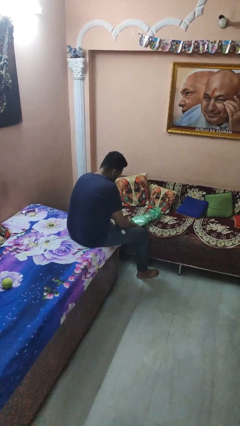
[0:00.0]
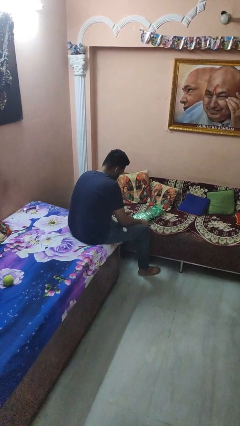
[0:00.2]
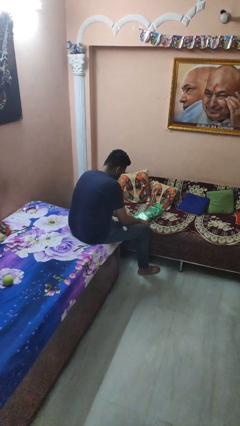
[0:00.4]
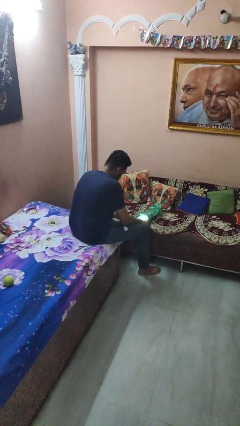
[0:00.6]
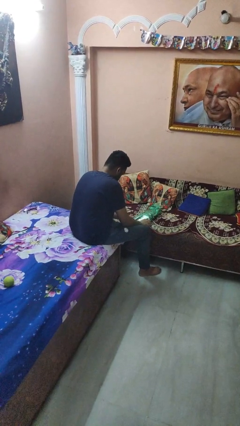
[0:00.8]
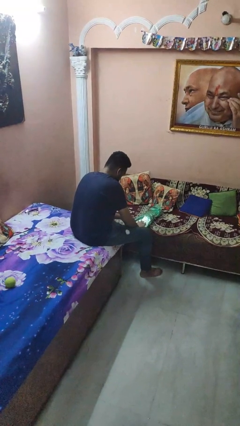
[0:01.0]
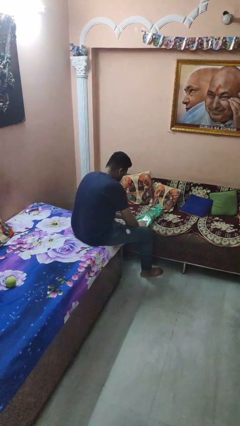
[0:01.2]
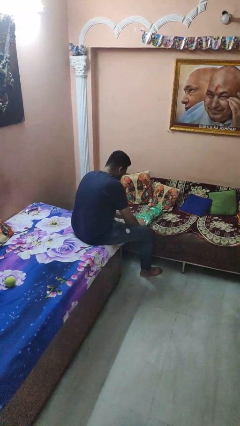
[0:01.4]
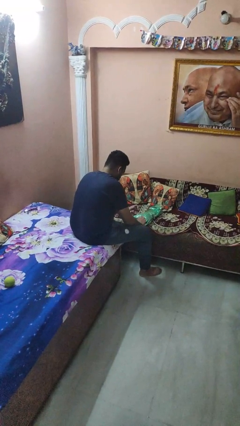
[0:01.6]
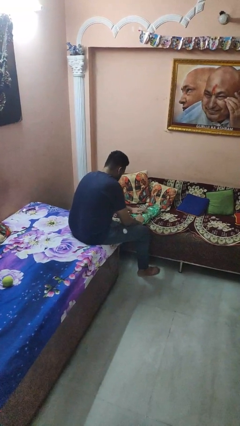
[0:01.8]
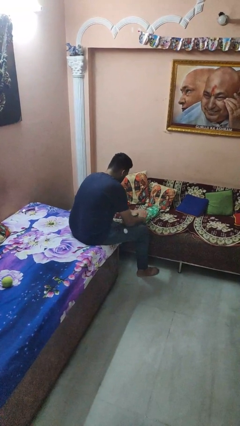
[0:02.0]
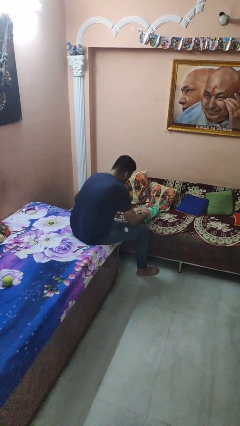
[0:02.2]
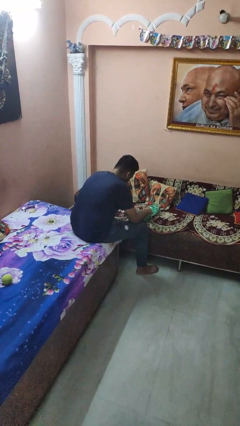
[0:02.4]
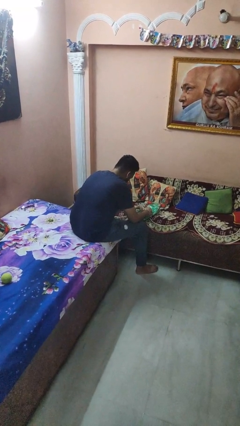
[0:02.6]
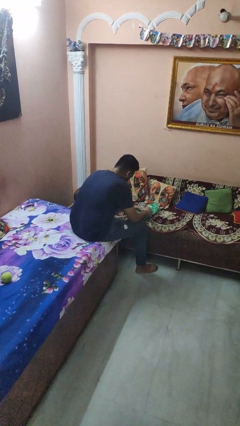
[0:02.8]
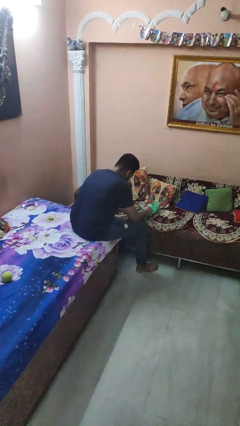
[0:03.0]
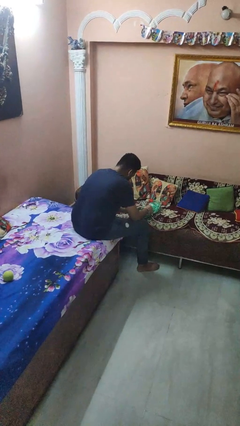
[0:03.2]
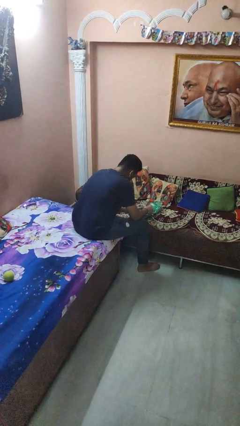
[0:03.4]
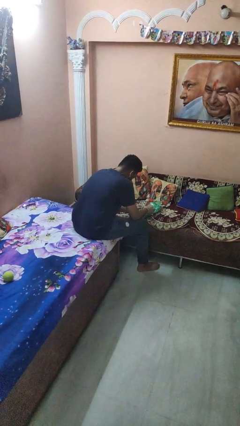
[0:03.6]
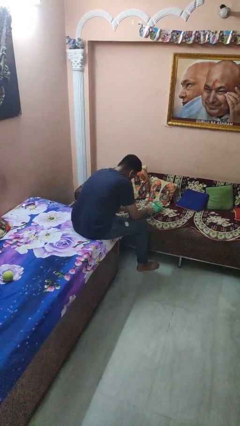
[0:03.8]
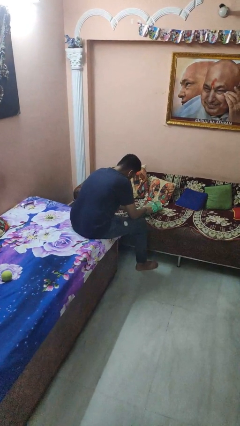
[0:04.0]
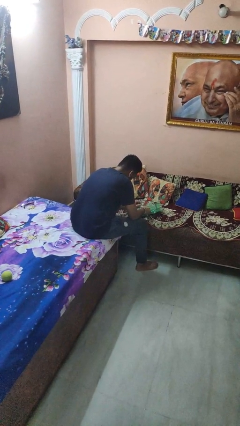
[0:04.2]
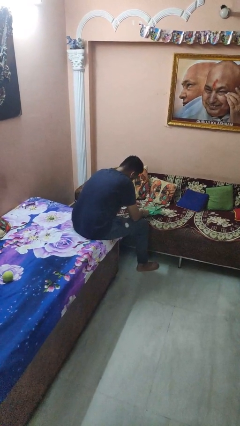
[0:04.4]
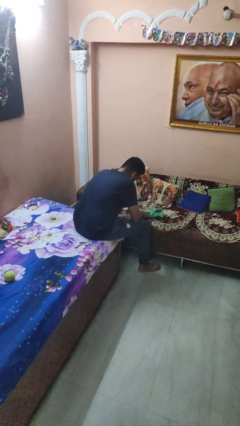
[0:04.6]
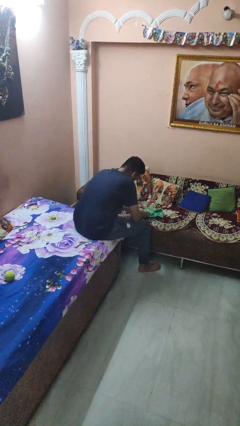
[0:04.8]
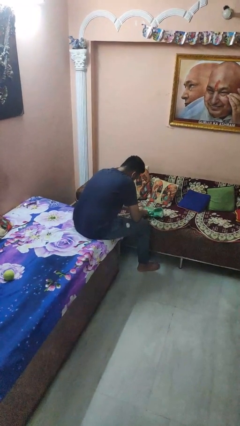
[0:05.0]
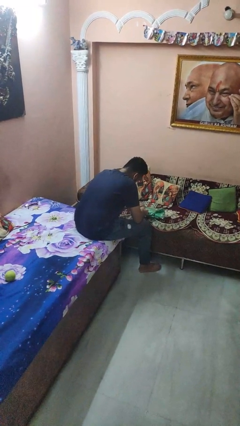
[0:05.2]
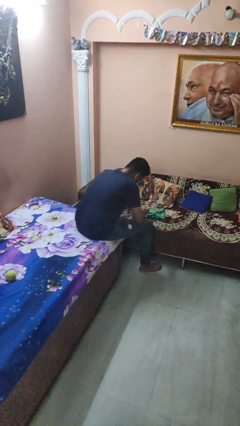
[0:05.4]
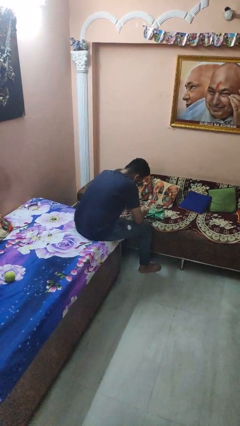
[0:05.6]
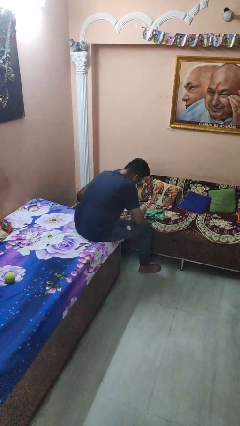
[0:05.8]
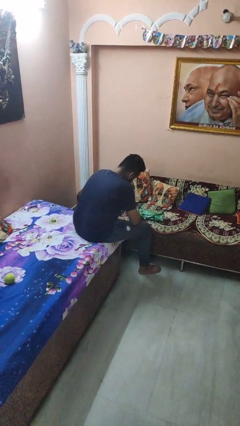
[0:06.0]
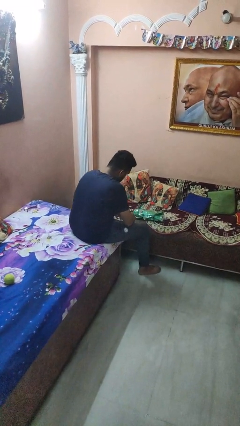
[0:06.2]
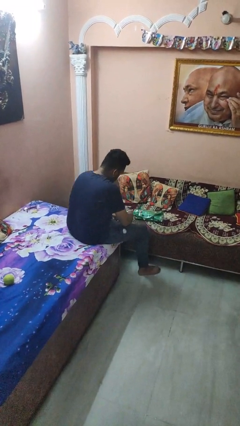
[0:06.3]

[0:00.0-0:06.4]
person wraps box

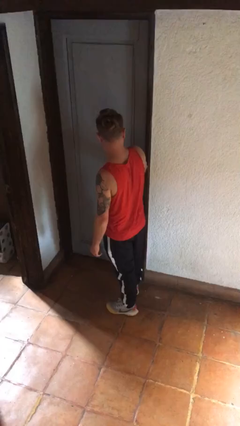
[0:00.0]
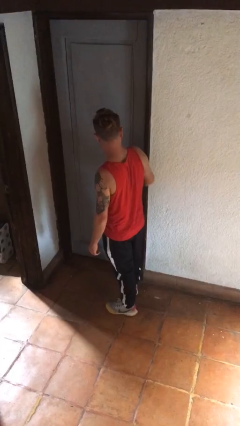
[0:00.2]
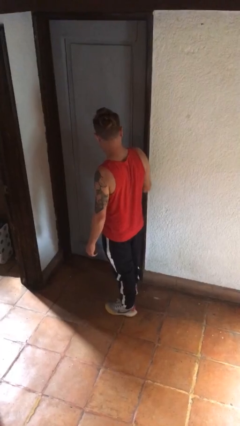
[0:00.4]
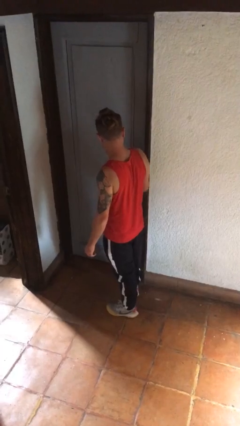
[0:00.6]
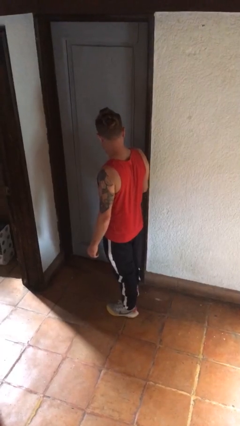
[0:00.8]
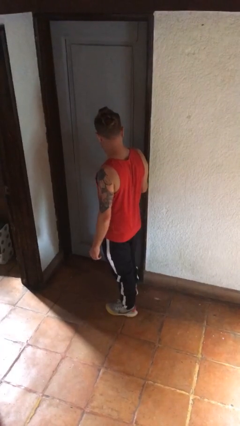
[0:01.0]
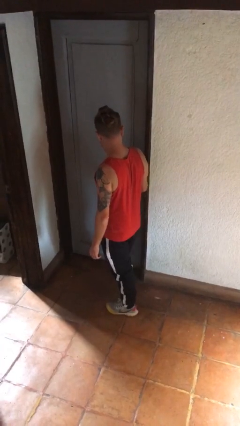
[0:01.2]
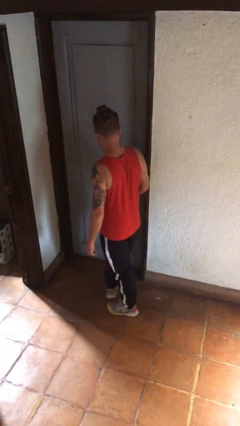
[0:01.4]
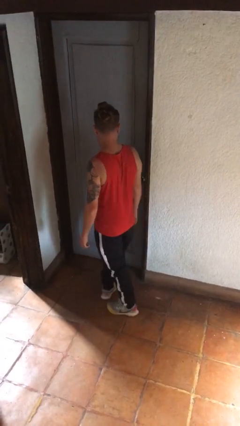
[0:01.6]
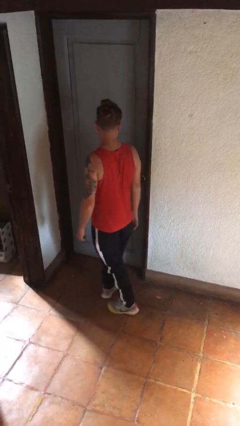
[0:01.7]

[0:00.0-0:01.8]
person locks door with keys

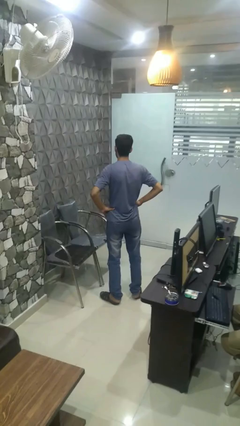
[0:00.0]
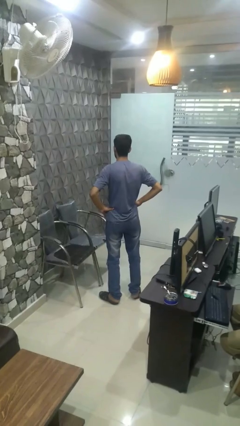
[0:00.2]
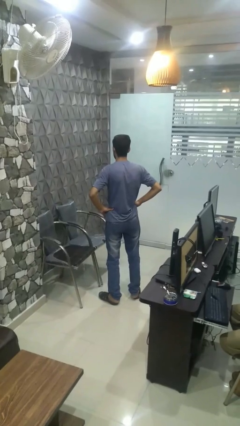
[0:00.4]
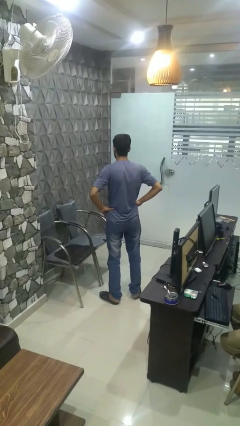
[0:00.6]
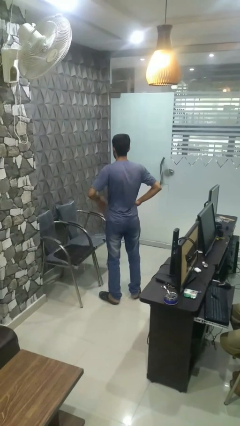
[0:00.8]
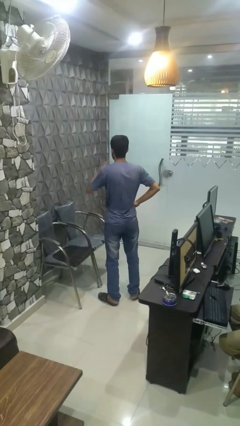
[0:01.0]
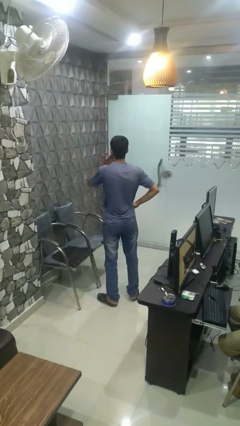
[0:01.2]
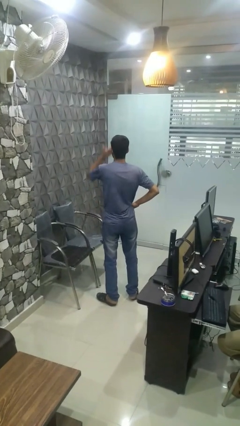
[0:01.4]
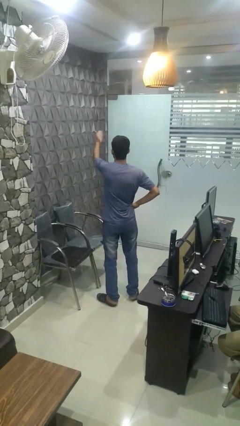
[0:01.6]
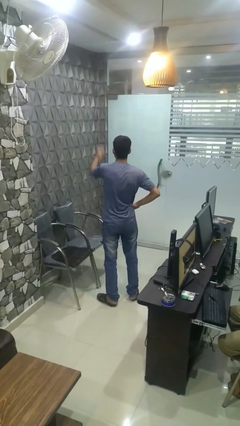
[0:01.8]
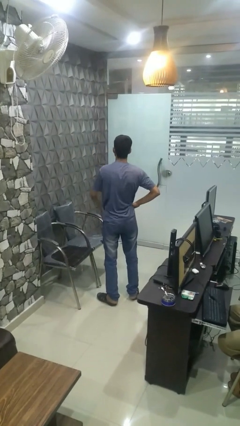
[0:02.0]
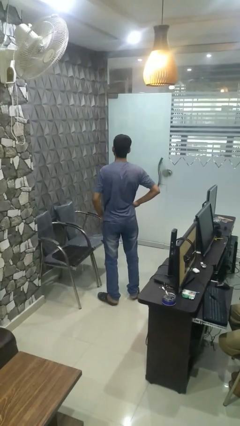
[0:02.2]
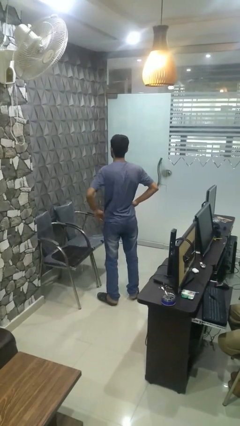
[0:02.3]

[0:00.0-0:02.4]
person gestures blow kiss

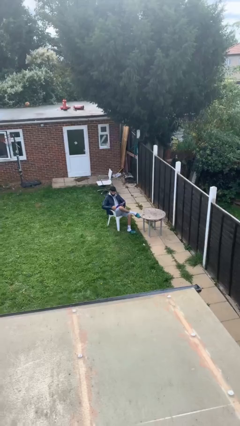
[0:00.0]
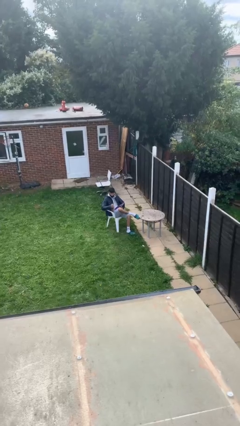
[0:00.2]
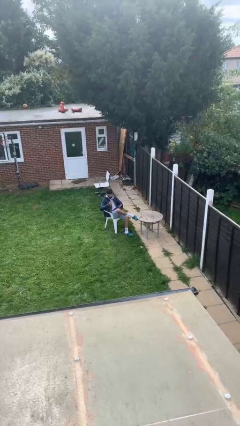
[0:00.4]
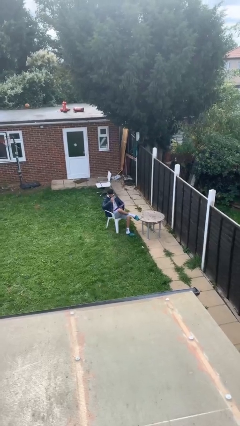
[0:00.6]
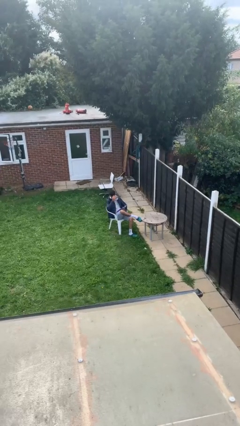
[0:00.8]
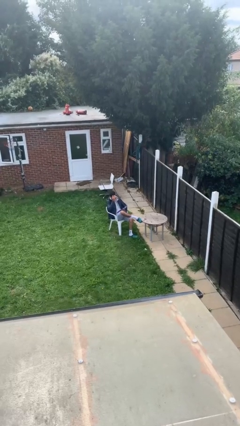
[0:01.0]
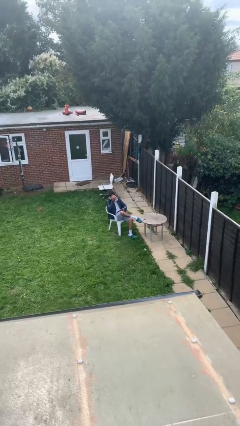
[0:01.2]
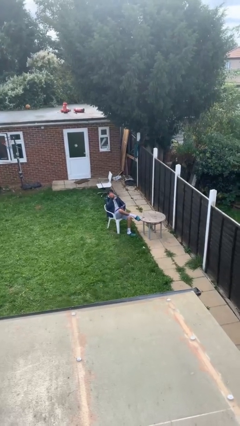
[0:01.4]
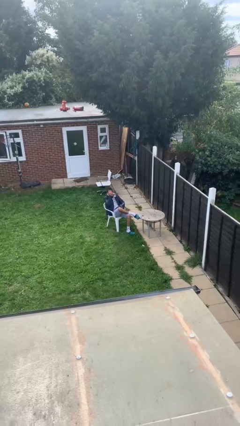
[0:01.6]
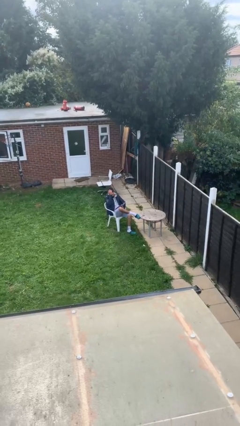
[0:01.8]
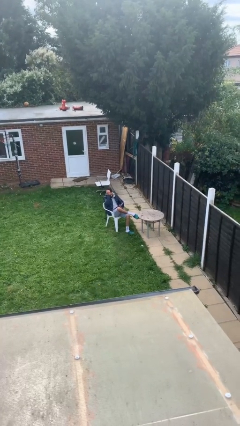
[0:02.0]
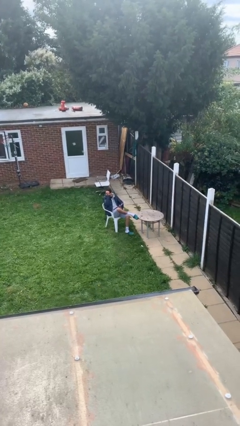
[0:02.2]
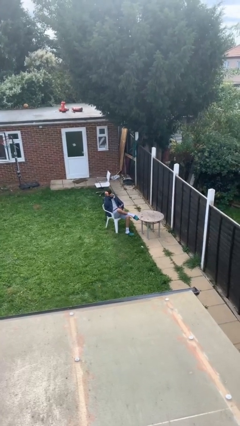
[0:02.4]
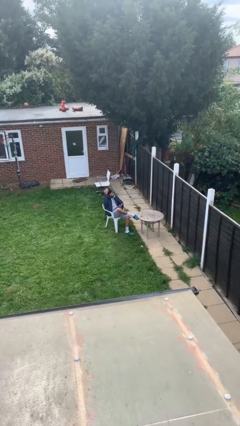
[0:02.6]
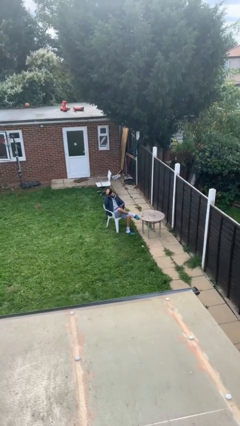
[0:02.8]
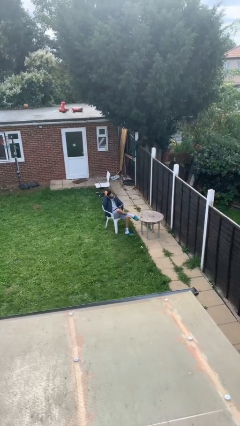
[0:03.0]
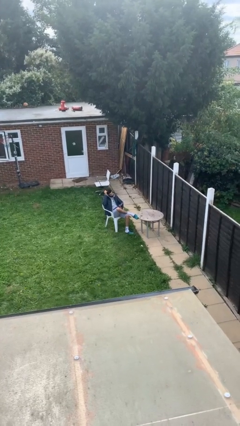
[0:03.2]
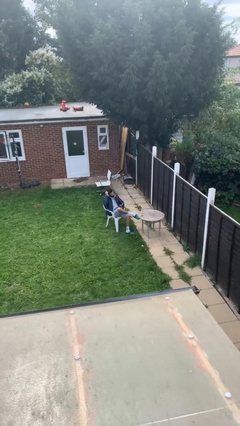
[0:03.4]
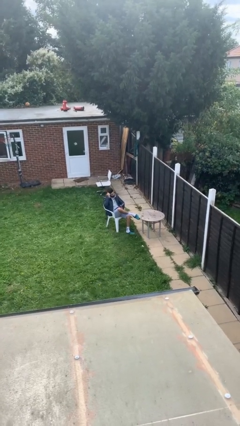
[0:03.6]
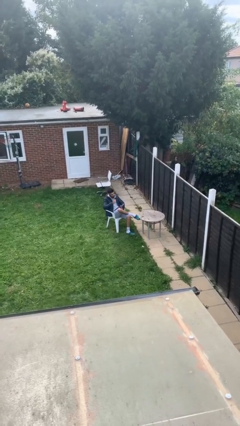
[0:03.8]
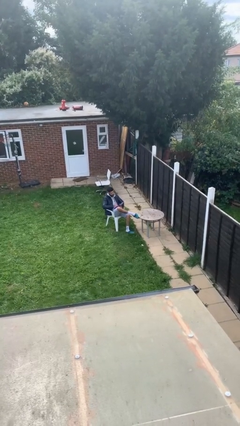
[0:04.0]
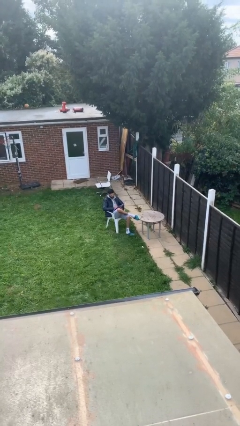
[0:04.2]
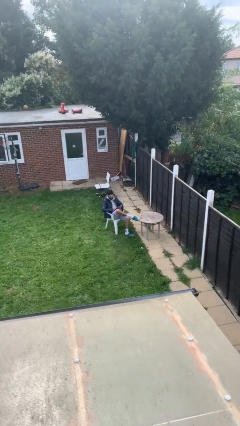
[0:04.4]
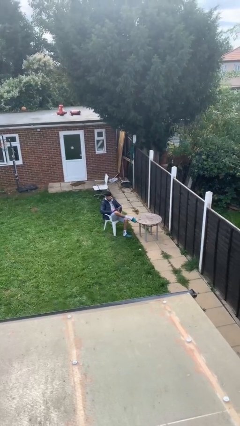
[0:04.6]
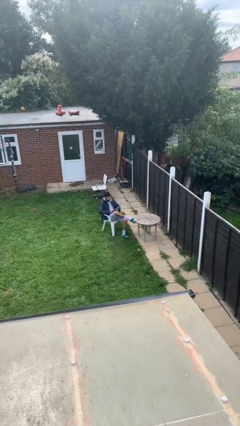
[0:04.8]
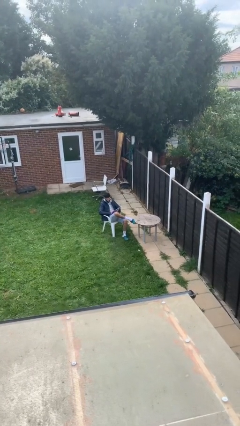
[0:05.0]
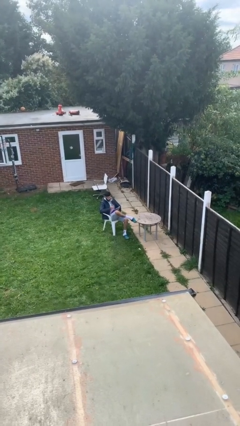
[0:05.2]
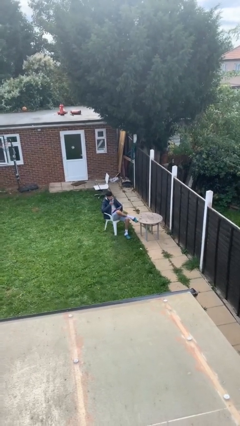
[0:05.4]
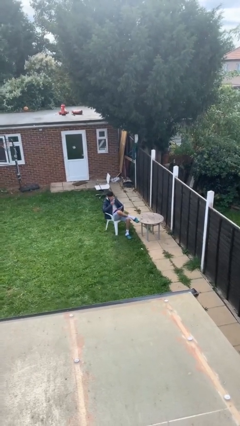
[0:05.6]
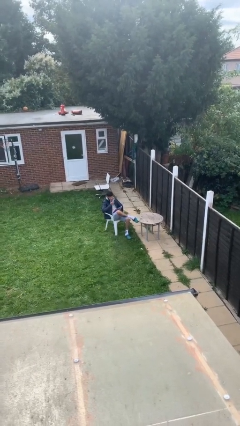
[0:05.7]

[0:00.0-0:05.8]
person reads document

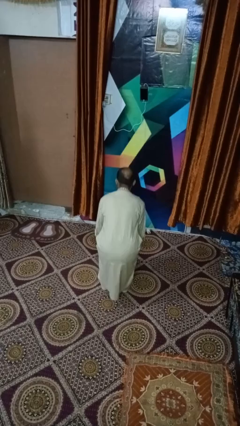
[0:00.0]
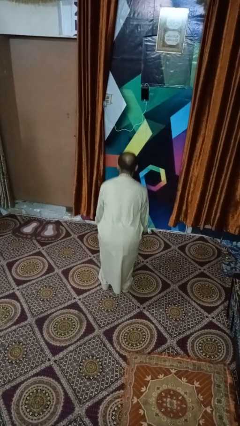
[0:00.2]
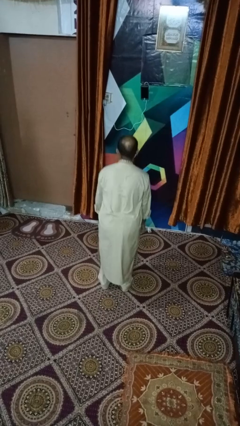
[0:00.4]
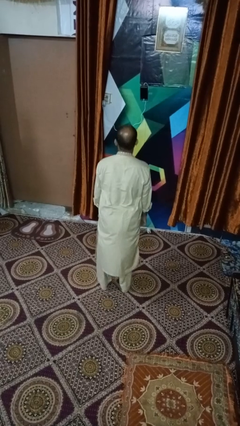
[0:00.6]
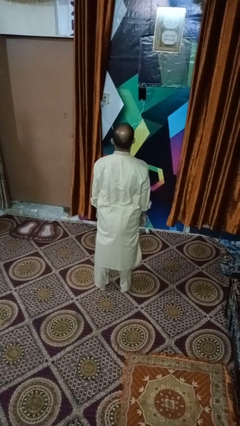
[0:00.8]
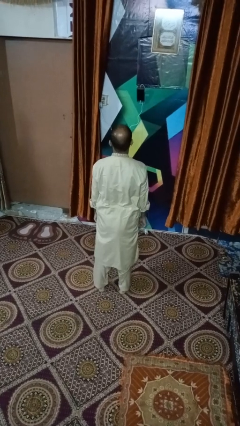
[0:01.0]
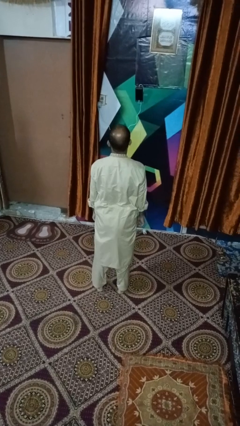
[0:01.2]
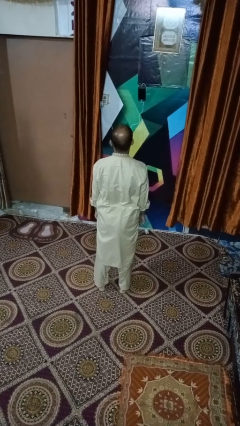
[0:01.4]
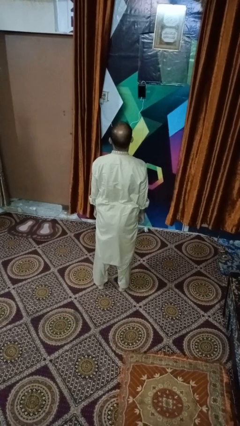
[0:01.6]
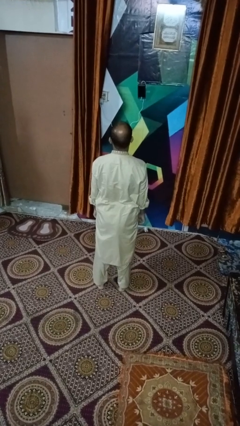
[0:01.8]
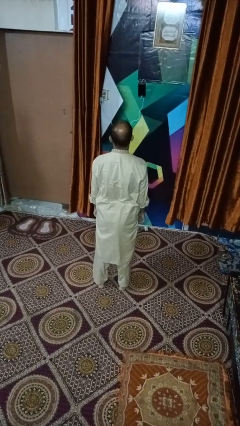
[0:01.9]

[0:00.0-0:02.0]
person stands up
